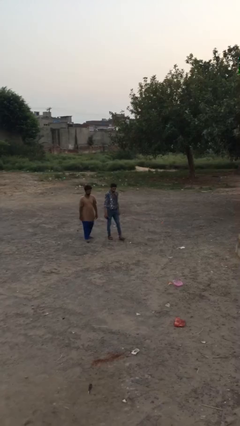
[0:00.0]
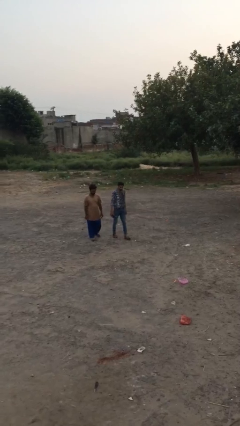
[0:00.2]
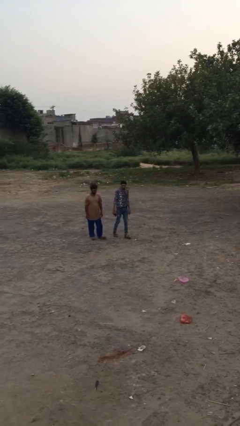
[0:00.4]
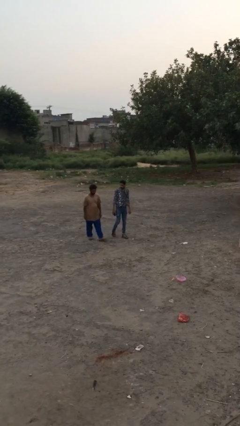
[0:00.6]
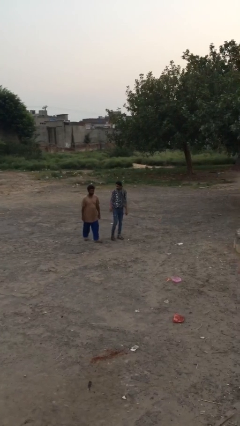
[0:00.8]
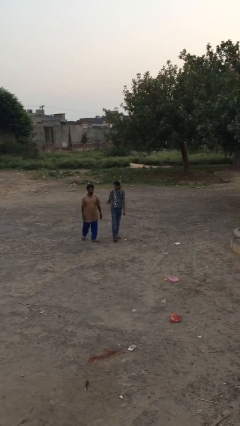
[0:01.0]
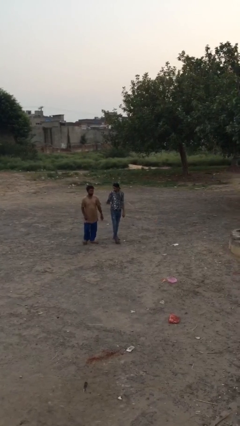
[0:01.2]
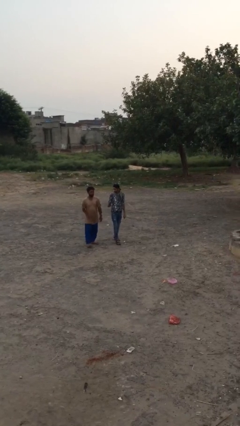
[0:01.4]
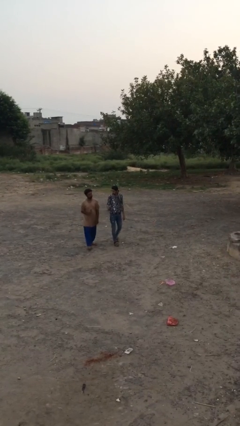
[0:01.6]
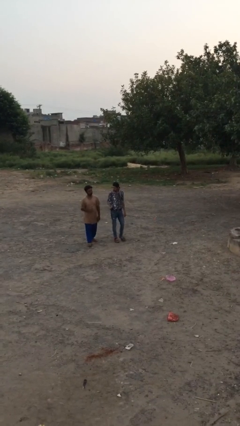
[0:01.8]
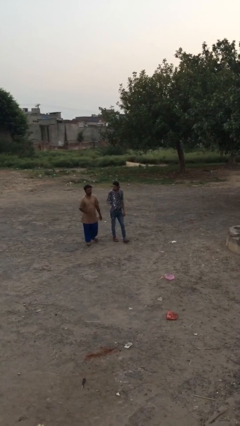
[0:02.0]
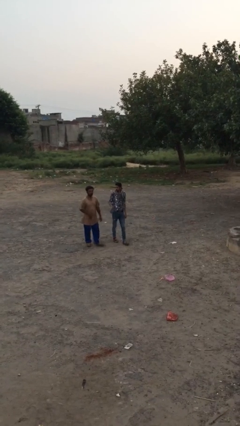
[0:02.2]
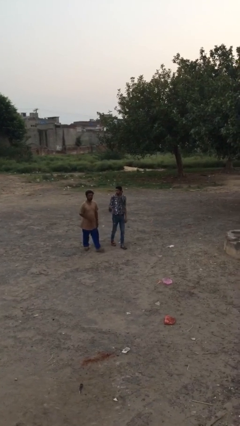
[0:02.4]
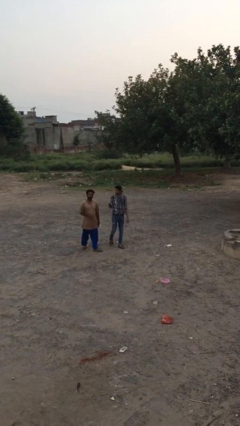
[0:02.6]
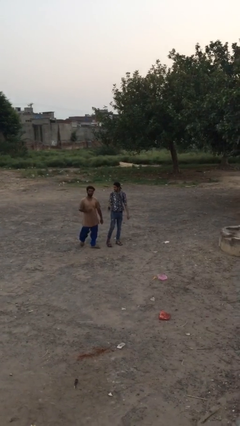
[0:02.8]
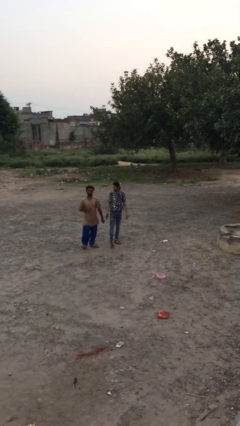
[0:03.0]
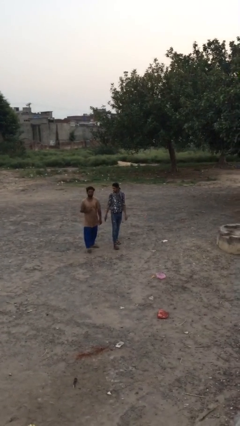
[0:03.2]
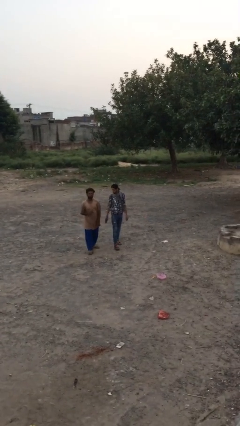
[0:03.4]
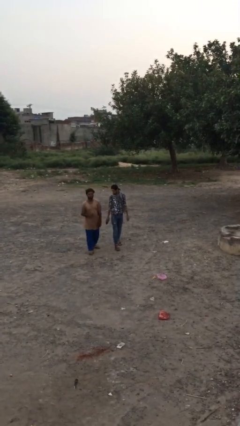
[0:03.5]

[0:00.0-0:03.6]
person talks to person

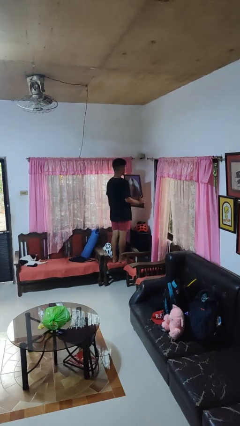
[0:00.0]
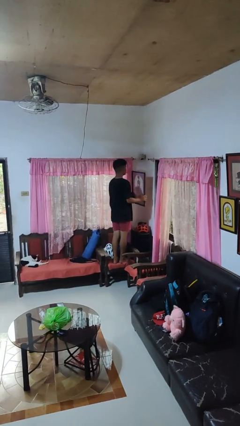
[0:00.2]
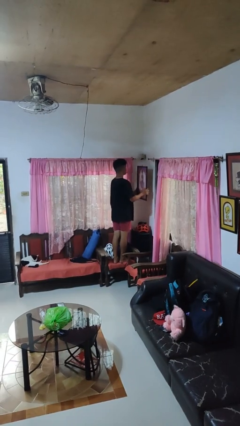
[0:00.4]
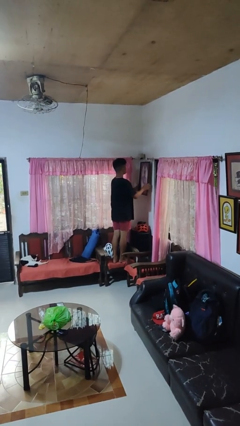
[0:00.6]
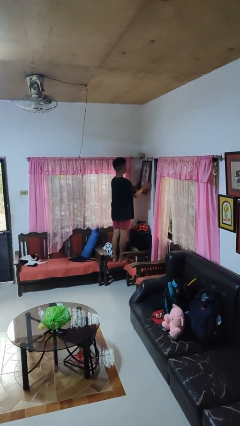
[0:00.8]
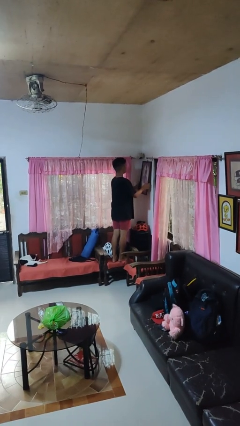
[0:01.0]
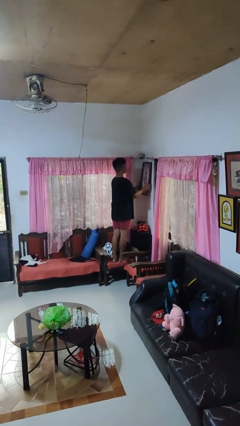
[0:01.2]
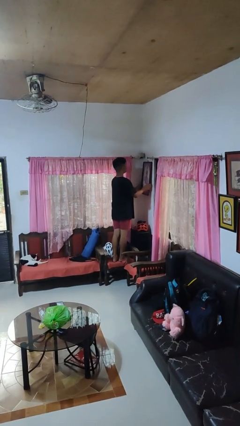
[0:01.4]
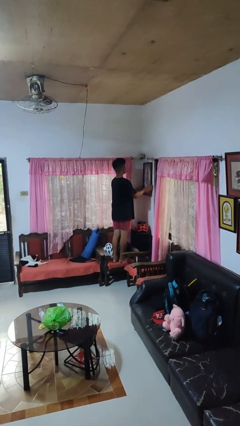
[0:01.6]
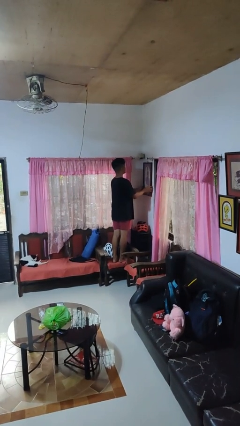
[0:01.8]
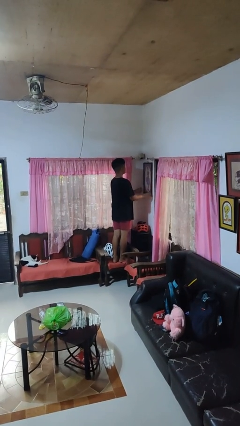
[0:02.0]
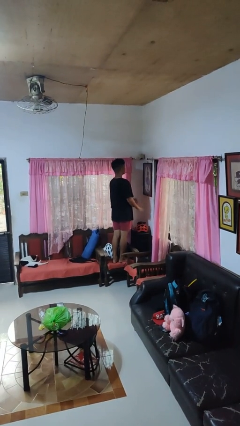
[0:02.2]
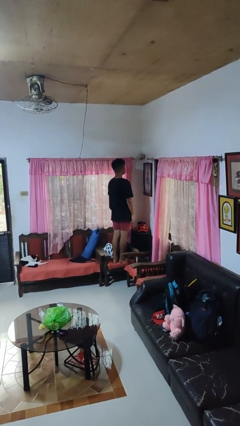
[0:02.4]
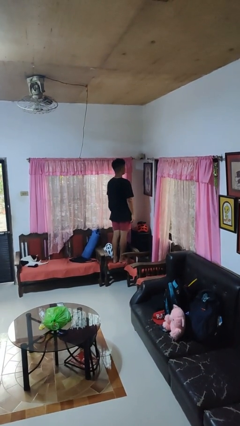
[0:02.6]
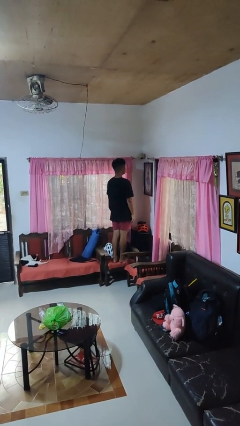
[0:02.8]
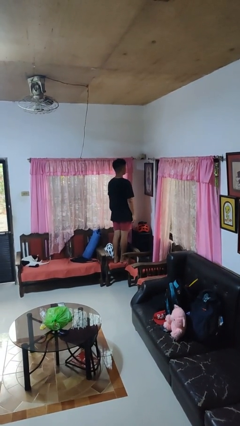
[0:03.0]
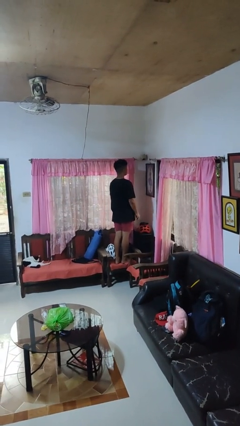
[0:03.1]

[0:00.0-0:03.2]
person puts up picture frame

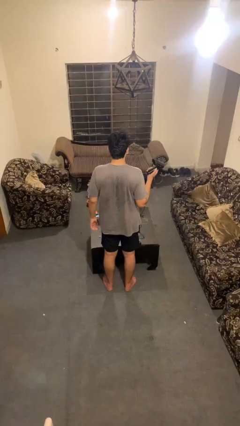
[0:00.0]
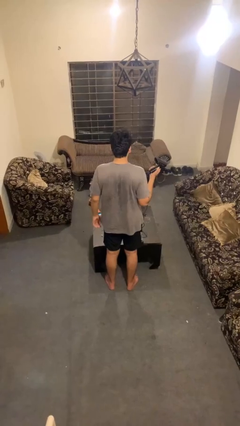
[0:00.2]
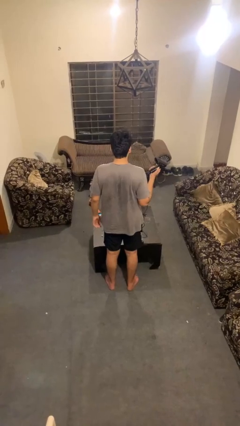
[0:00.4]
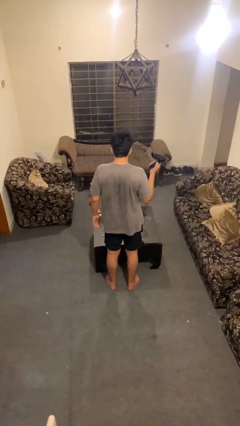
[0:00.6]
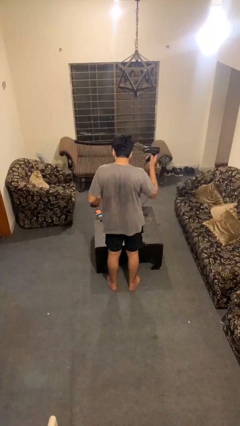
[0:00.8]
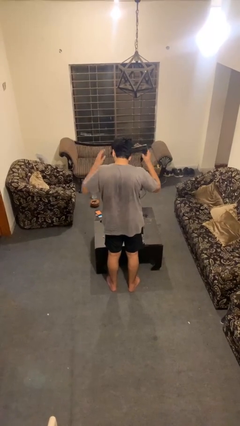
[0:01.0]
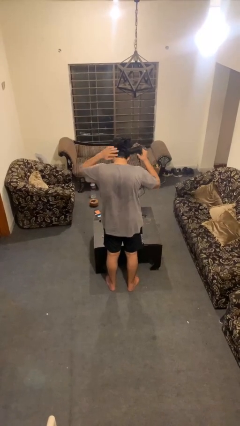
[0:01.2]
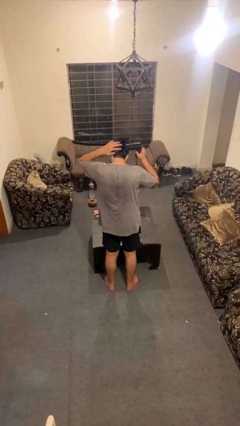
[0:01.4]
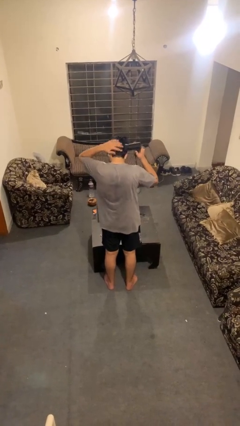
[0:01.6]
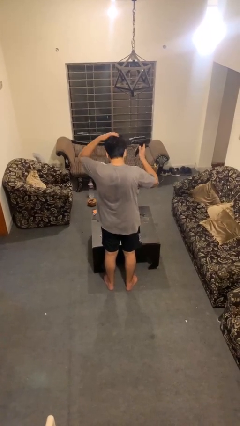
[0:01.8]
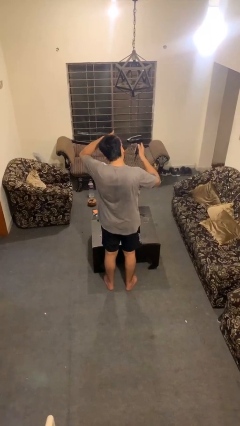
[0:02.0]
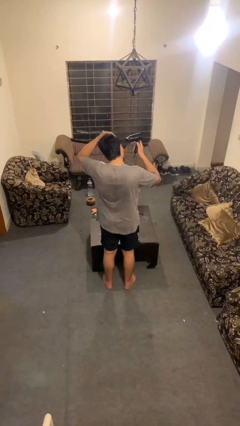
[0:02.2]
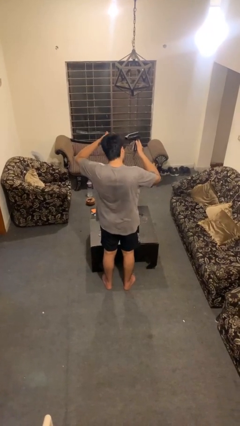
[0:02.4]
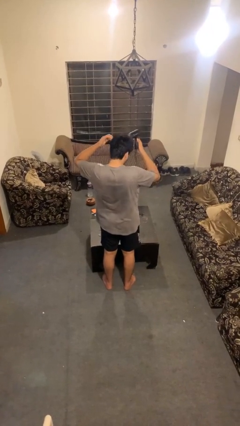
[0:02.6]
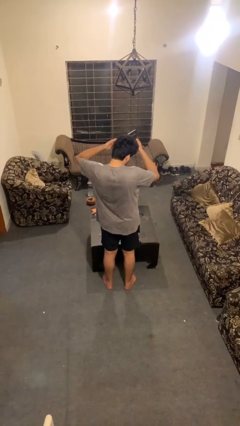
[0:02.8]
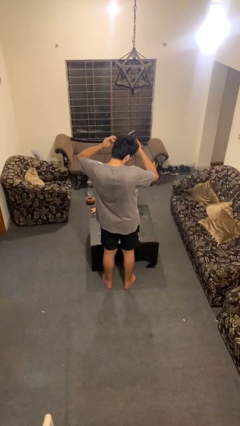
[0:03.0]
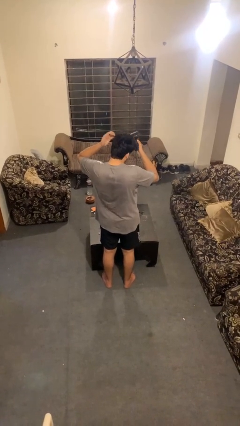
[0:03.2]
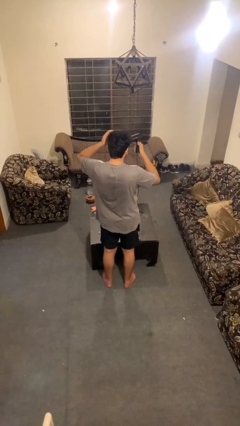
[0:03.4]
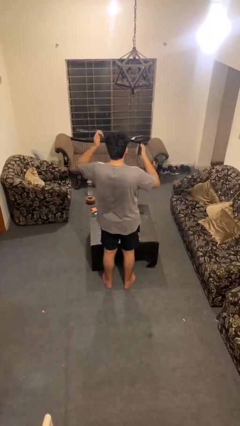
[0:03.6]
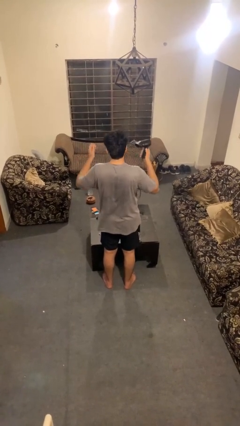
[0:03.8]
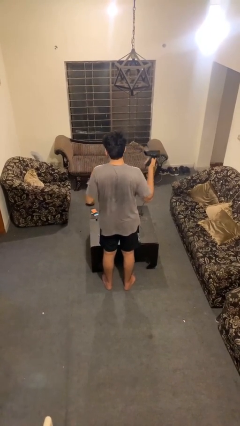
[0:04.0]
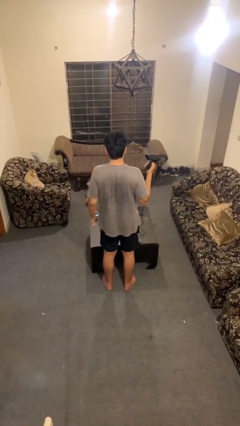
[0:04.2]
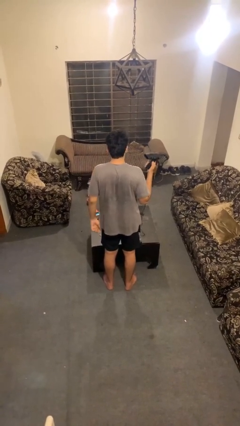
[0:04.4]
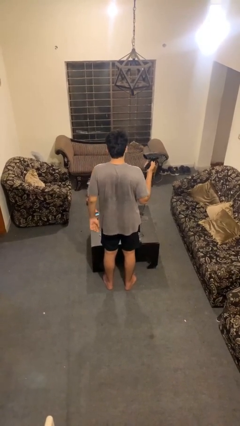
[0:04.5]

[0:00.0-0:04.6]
person dries hair with hairdryer

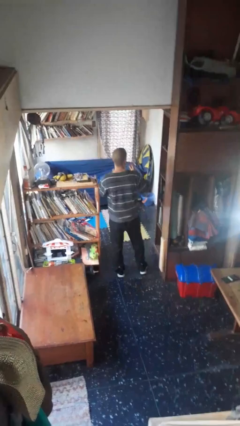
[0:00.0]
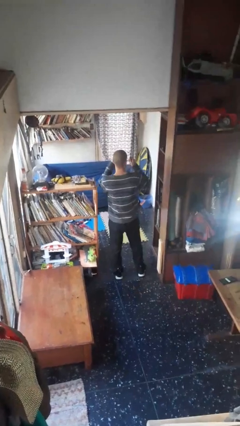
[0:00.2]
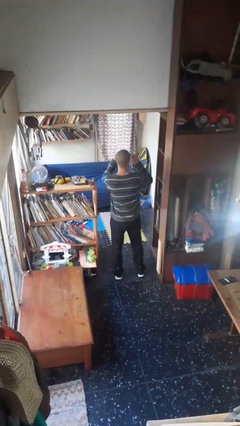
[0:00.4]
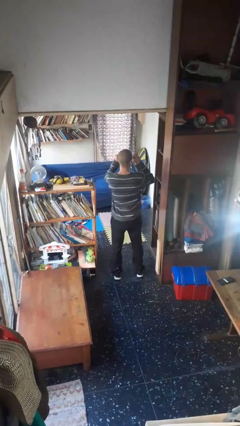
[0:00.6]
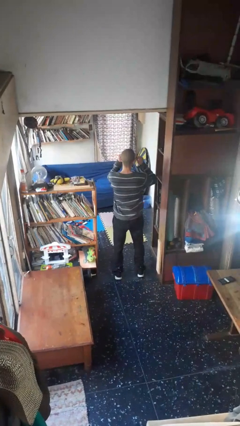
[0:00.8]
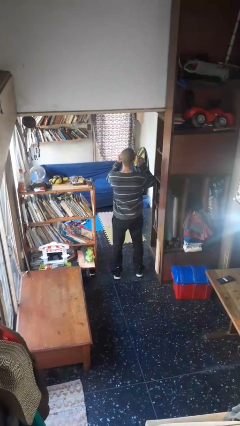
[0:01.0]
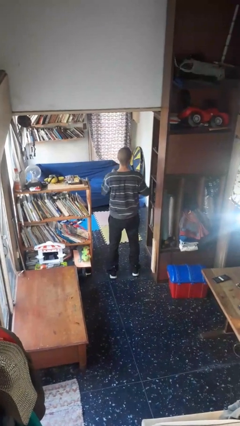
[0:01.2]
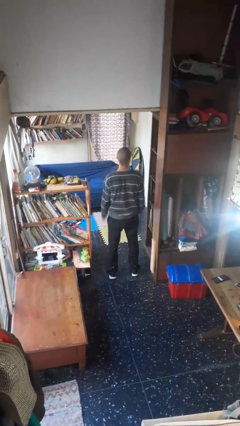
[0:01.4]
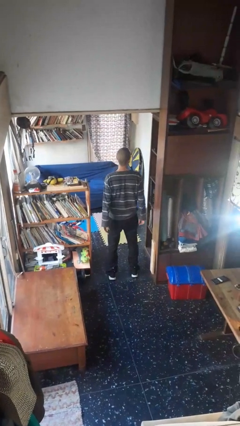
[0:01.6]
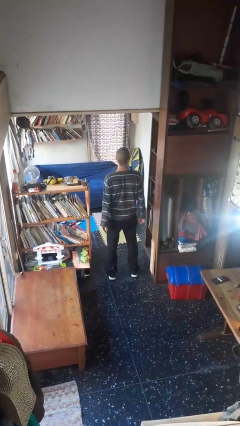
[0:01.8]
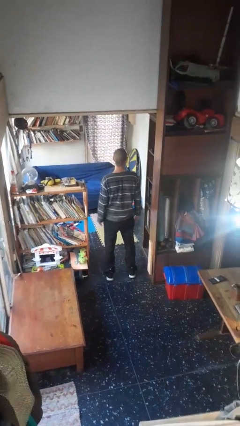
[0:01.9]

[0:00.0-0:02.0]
person puts on glasses

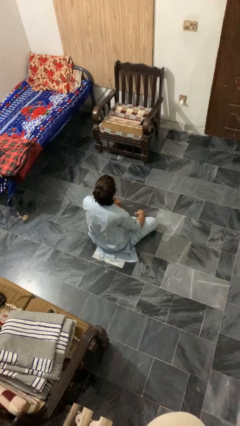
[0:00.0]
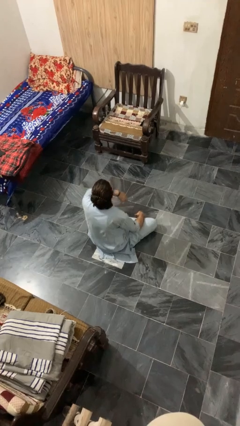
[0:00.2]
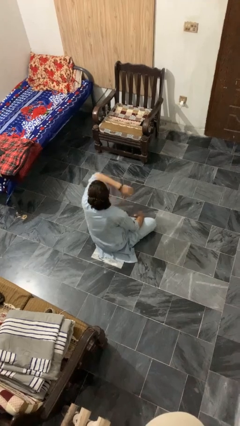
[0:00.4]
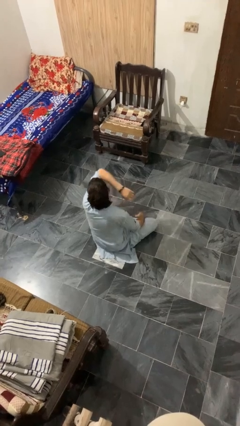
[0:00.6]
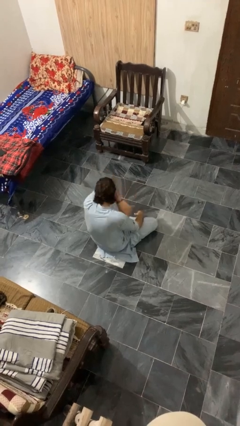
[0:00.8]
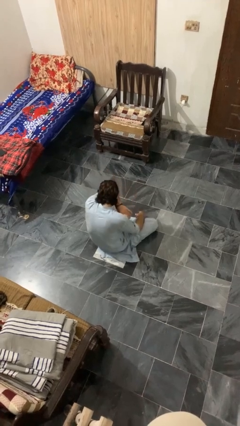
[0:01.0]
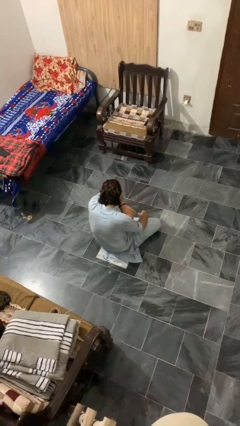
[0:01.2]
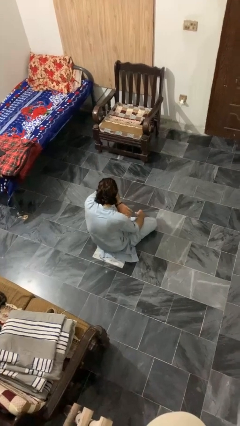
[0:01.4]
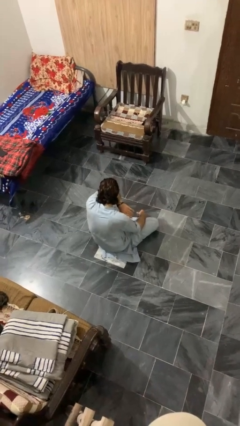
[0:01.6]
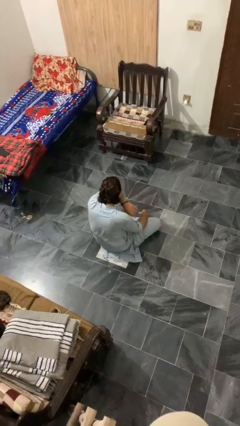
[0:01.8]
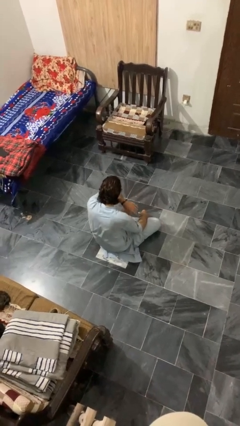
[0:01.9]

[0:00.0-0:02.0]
person sneezes into arm

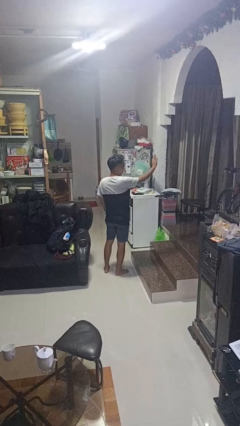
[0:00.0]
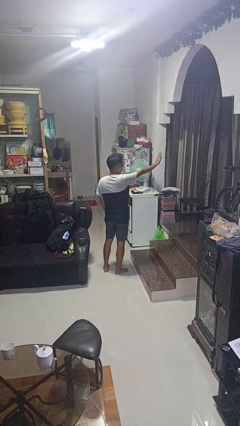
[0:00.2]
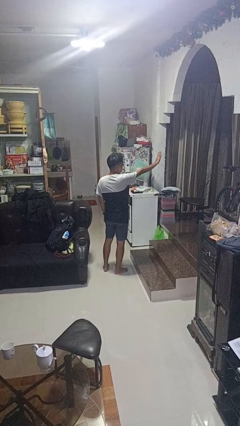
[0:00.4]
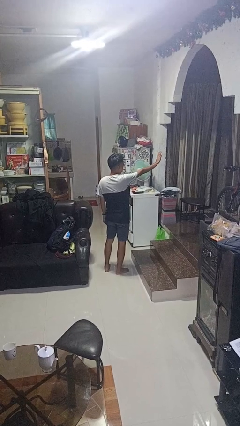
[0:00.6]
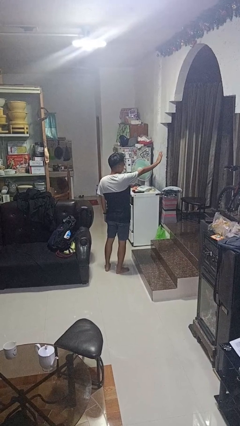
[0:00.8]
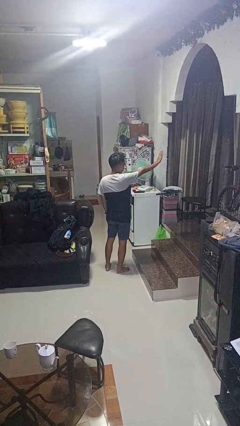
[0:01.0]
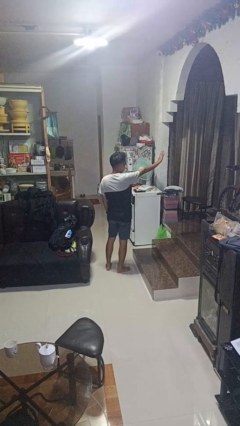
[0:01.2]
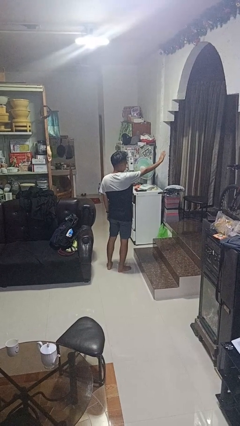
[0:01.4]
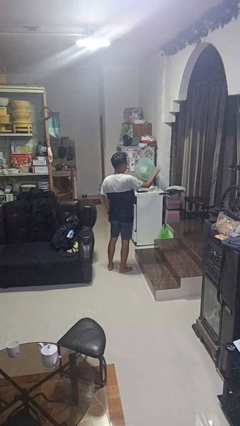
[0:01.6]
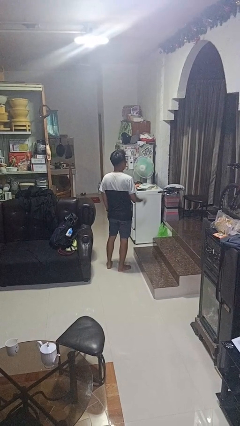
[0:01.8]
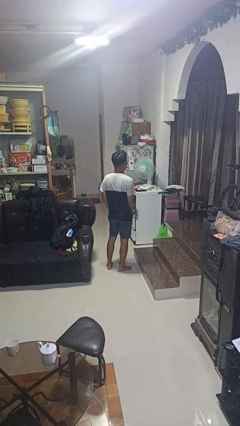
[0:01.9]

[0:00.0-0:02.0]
person gestures stop

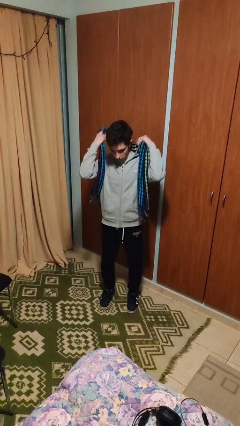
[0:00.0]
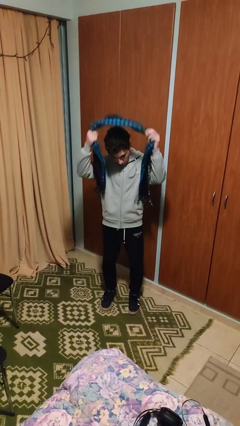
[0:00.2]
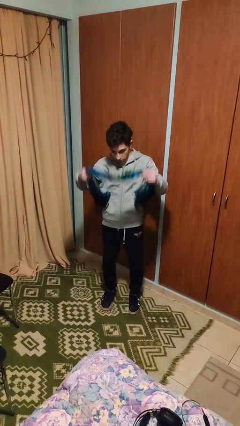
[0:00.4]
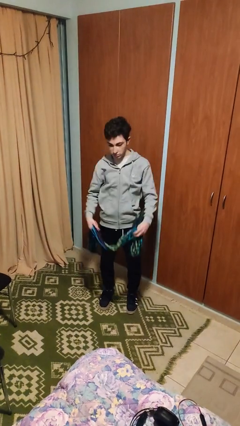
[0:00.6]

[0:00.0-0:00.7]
person takes off scarf
